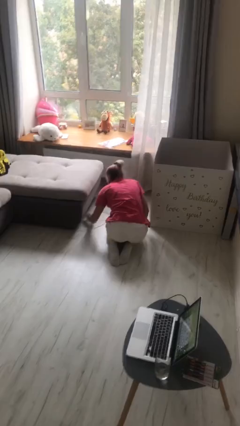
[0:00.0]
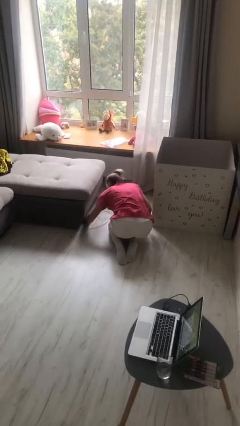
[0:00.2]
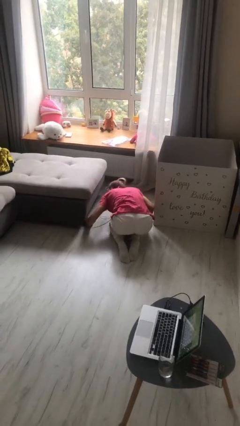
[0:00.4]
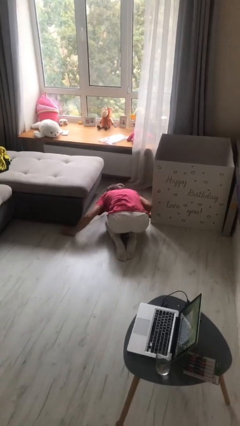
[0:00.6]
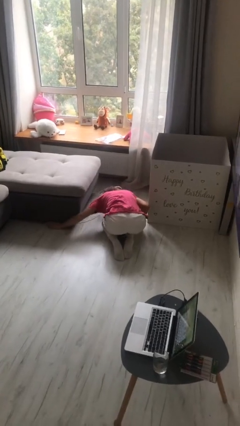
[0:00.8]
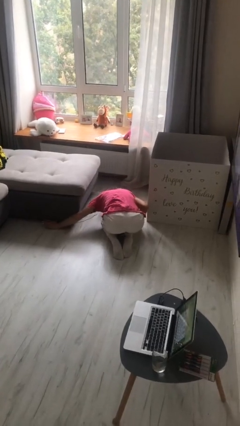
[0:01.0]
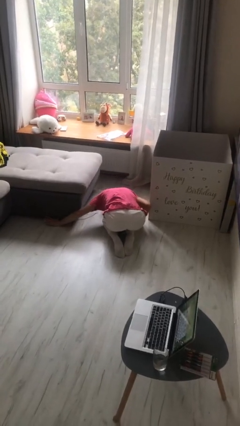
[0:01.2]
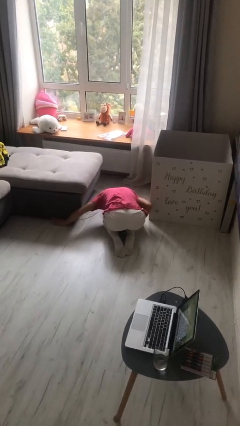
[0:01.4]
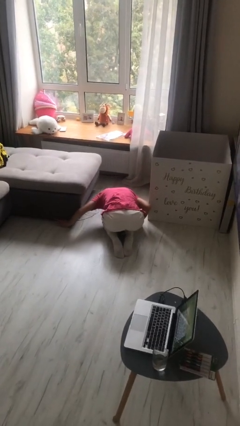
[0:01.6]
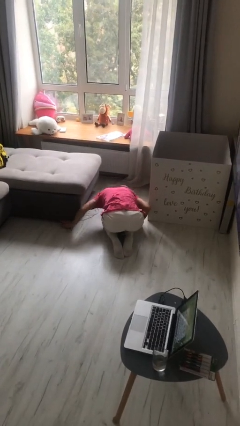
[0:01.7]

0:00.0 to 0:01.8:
person searches under couch

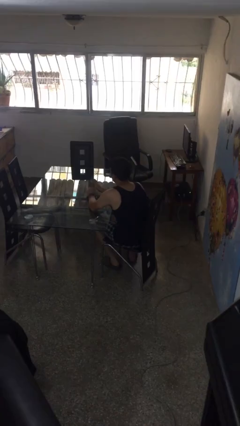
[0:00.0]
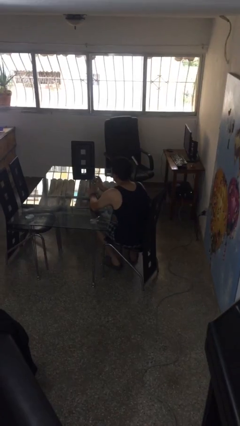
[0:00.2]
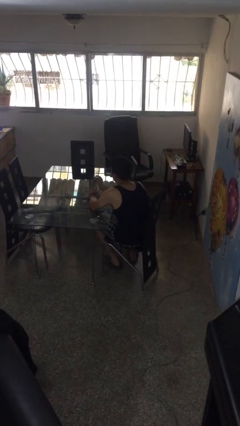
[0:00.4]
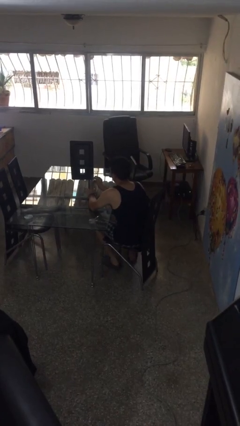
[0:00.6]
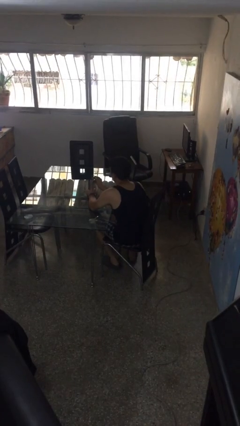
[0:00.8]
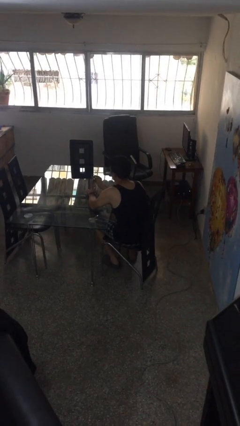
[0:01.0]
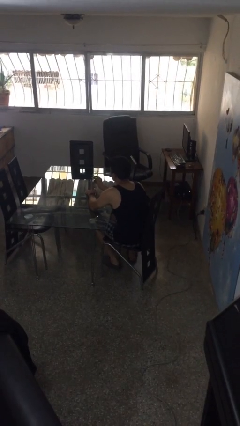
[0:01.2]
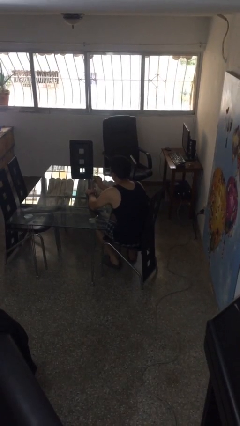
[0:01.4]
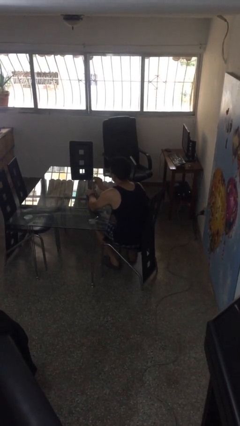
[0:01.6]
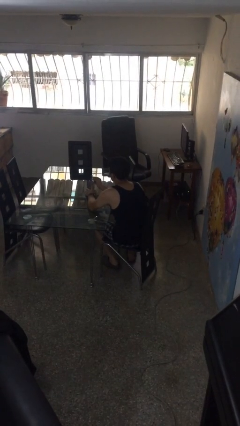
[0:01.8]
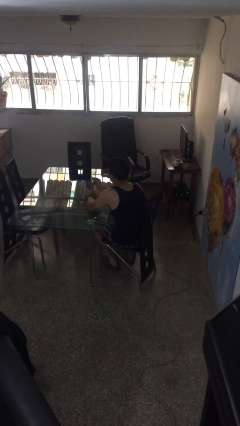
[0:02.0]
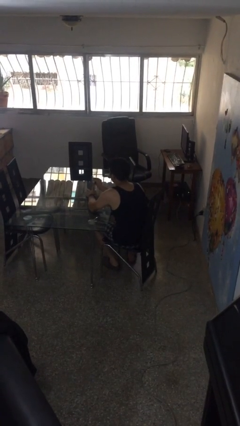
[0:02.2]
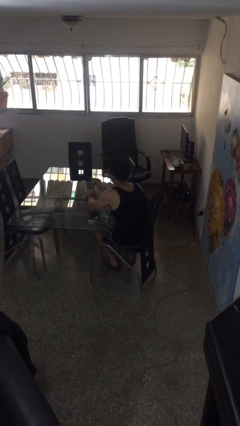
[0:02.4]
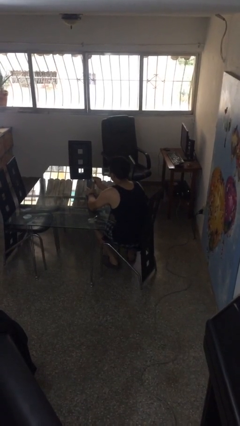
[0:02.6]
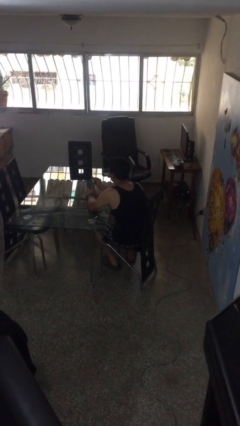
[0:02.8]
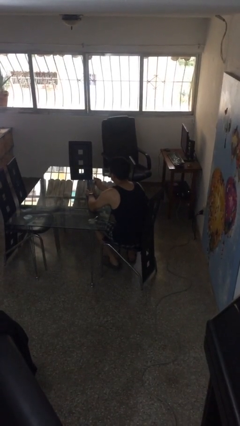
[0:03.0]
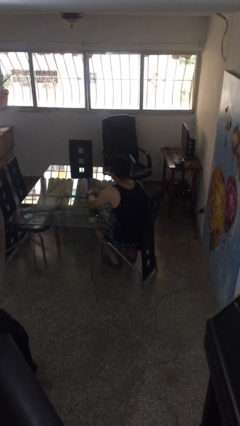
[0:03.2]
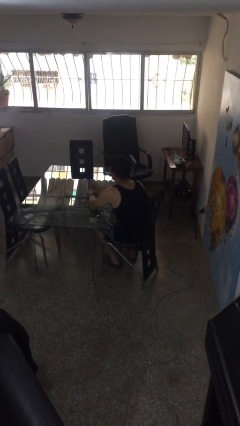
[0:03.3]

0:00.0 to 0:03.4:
person clips fingernails

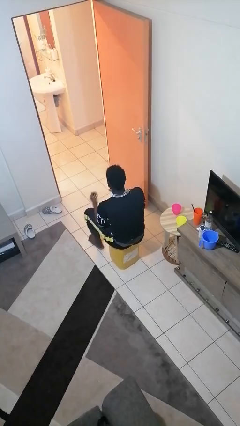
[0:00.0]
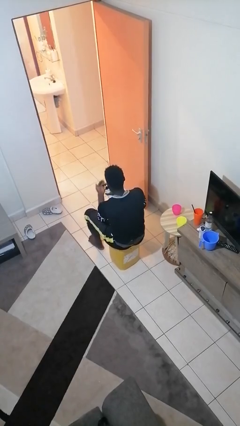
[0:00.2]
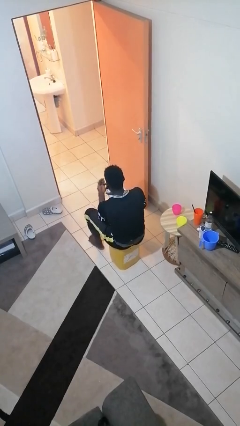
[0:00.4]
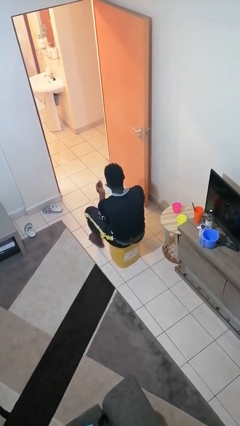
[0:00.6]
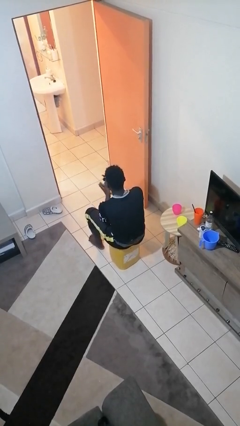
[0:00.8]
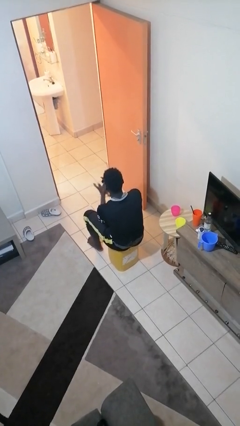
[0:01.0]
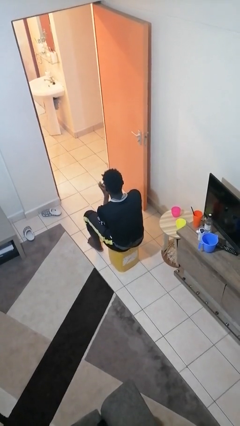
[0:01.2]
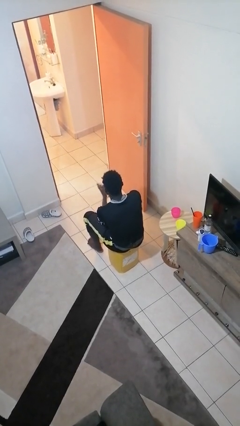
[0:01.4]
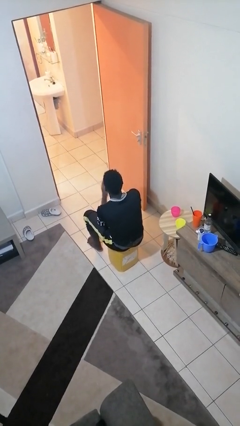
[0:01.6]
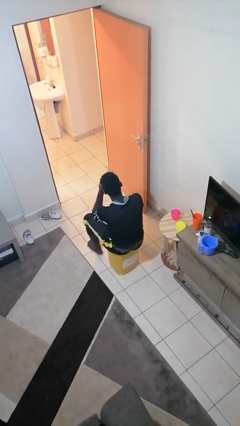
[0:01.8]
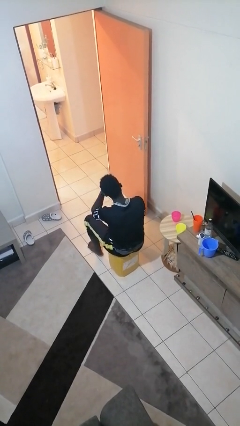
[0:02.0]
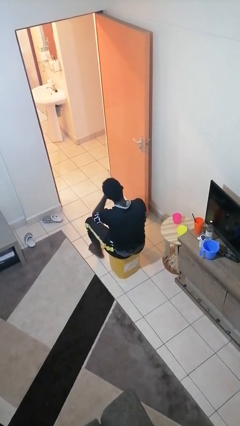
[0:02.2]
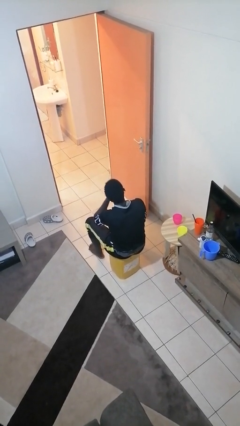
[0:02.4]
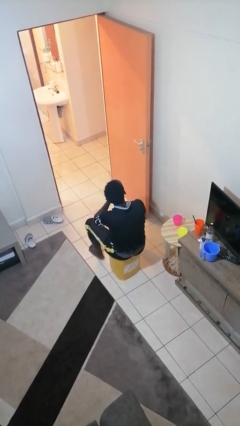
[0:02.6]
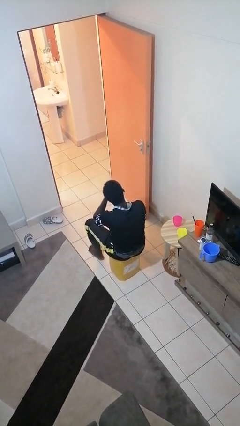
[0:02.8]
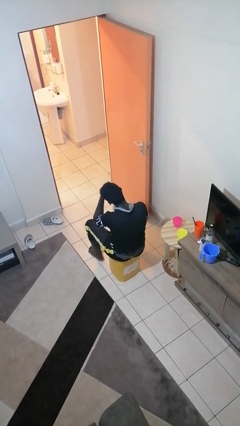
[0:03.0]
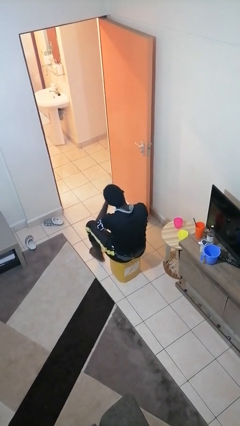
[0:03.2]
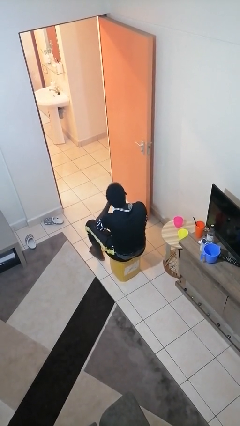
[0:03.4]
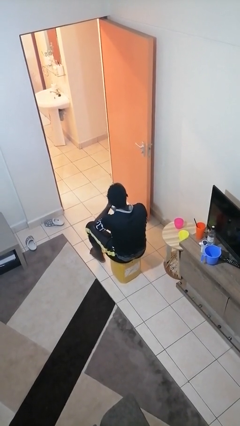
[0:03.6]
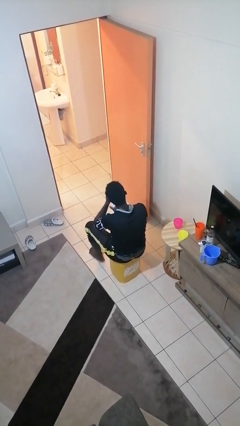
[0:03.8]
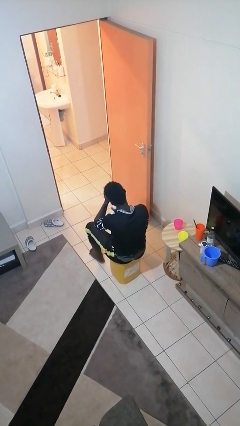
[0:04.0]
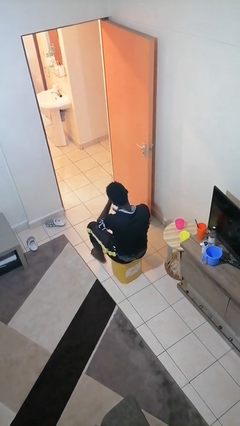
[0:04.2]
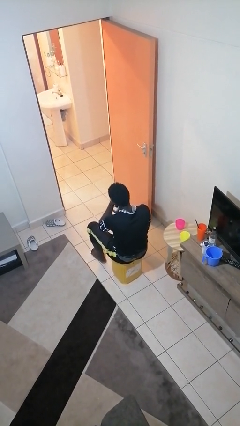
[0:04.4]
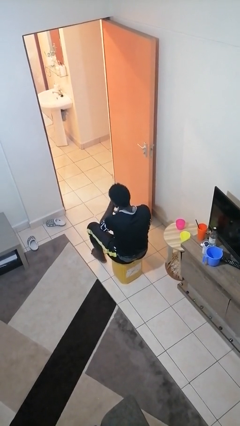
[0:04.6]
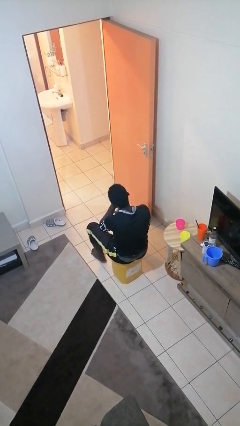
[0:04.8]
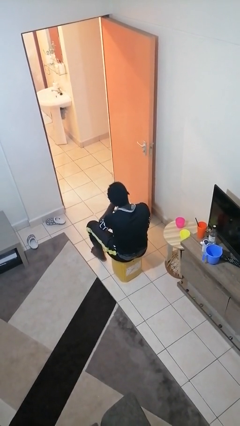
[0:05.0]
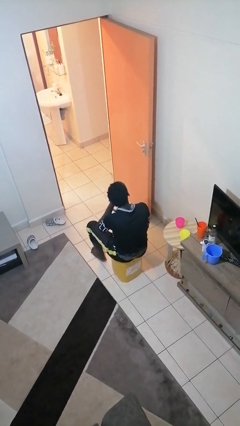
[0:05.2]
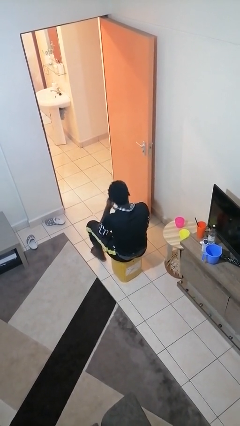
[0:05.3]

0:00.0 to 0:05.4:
person applies sunscreen

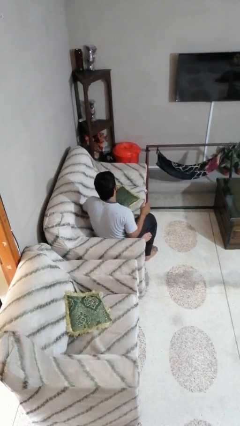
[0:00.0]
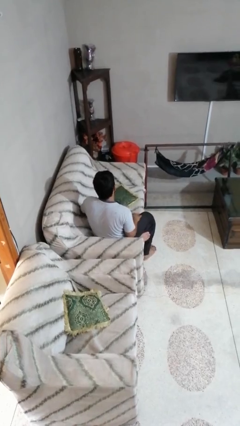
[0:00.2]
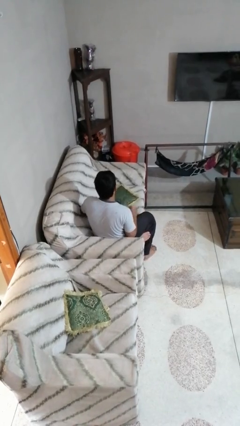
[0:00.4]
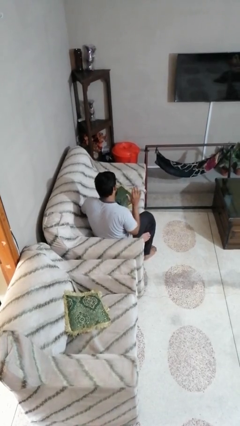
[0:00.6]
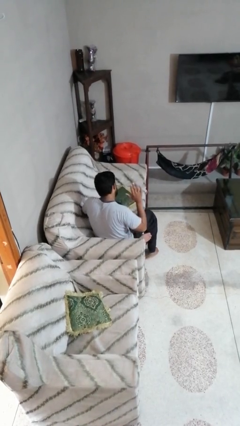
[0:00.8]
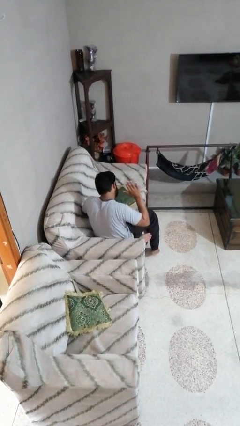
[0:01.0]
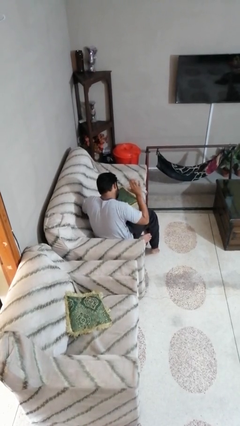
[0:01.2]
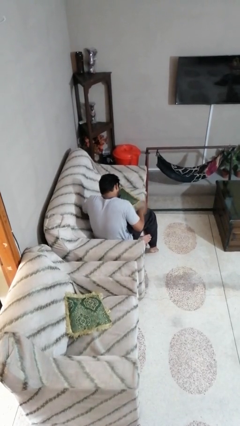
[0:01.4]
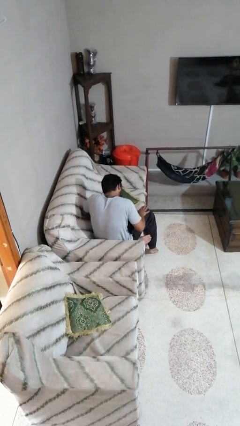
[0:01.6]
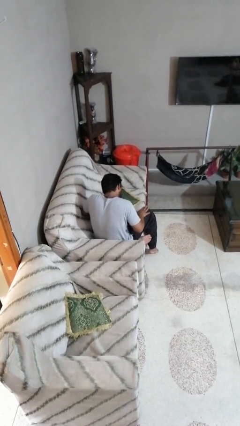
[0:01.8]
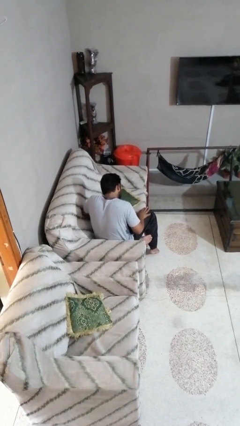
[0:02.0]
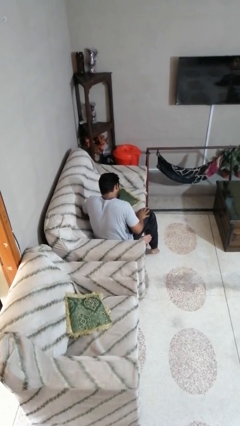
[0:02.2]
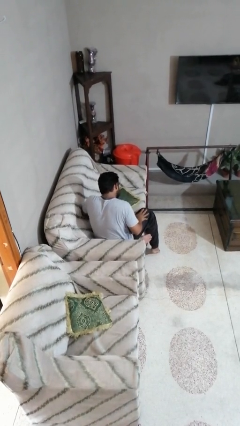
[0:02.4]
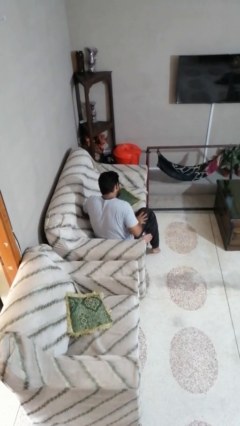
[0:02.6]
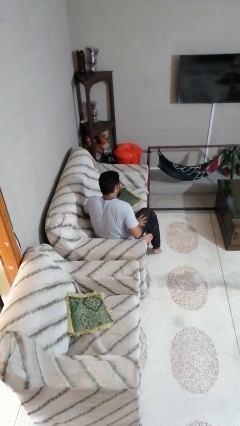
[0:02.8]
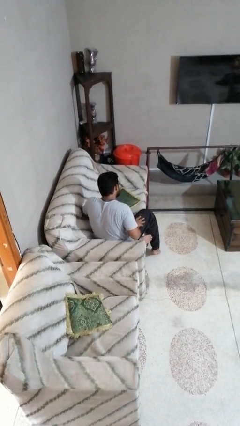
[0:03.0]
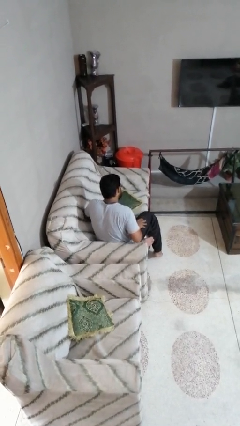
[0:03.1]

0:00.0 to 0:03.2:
person swats bug

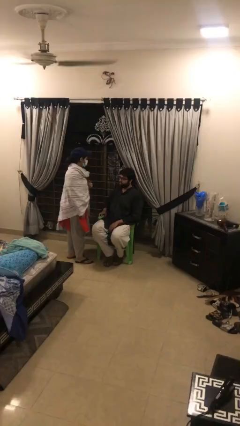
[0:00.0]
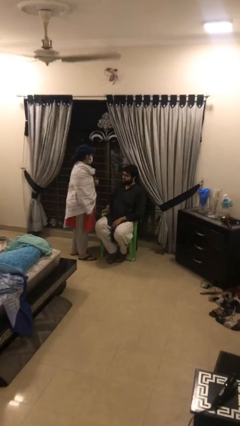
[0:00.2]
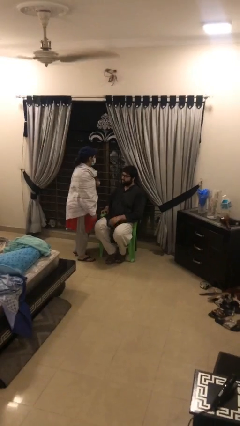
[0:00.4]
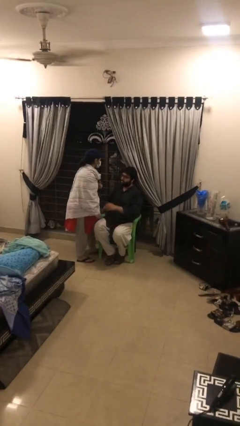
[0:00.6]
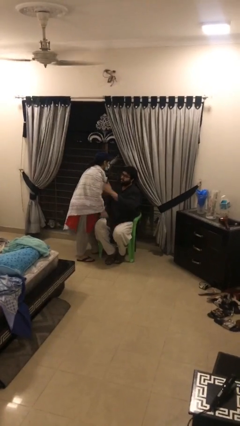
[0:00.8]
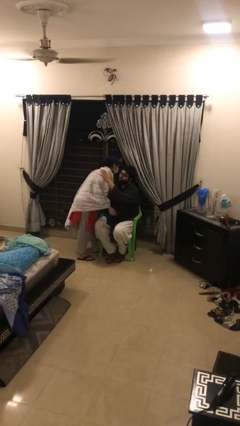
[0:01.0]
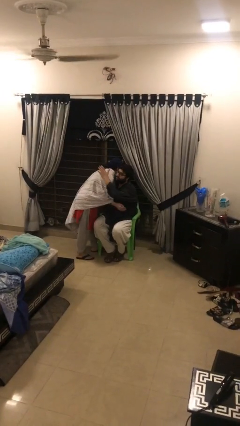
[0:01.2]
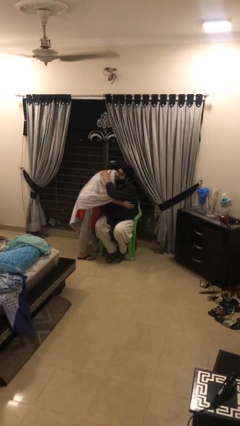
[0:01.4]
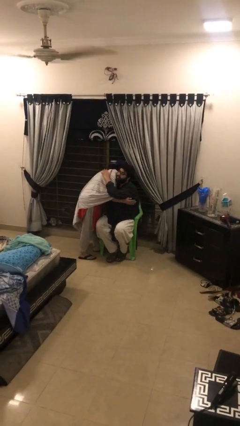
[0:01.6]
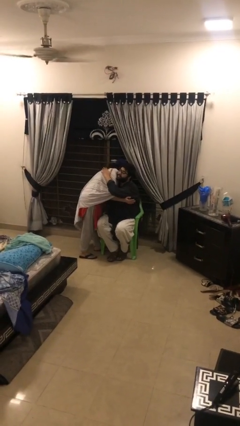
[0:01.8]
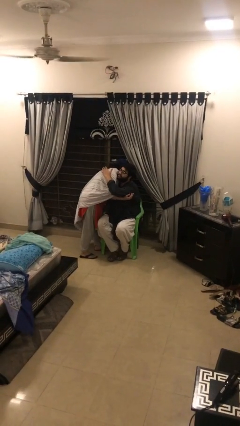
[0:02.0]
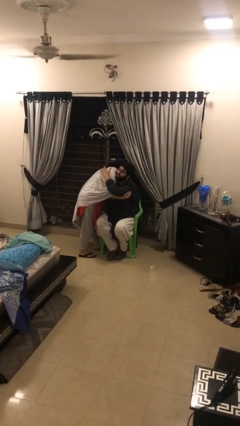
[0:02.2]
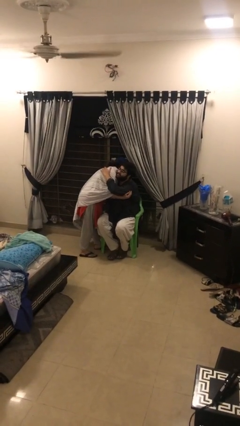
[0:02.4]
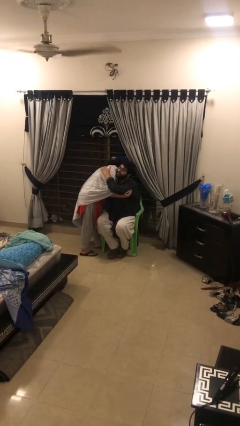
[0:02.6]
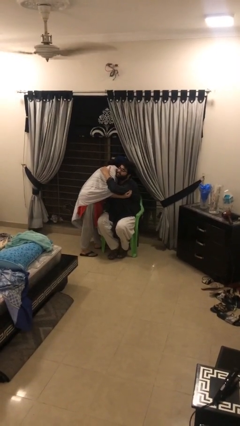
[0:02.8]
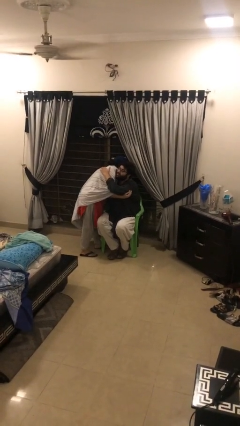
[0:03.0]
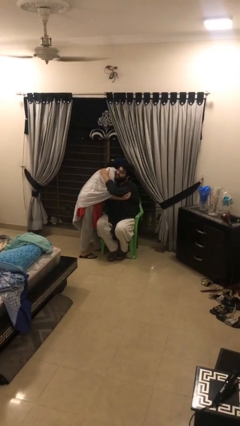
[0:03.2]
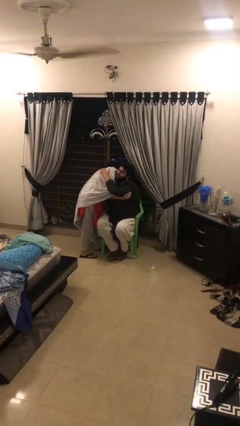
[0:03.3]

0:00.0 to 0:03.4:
person embraces person
